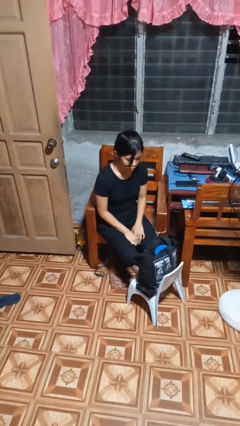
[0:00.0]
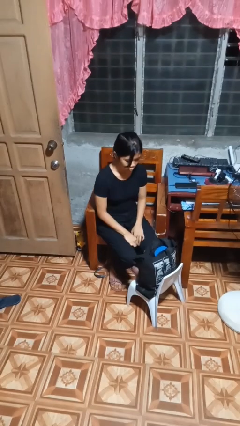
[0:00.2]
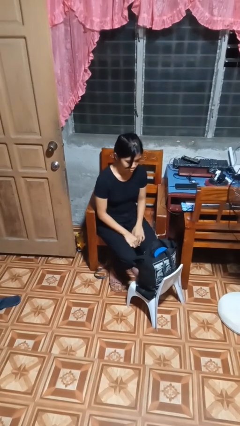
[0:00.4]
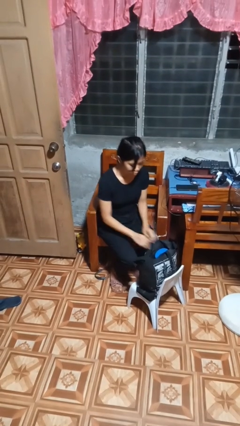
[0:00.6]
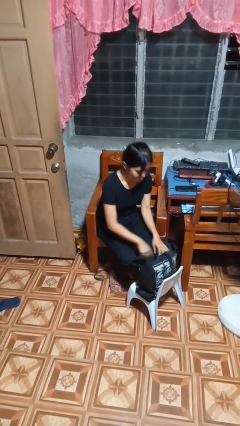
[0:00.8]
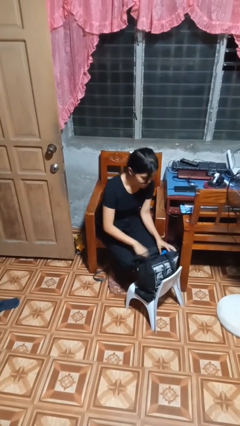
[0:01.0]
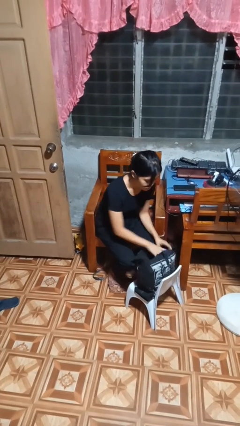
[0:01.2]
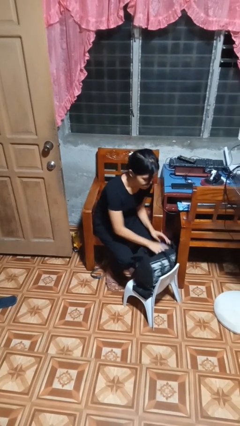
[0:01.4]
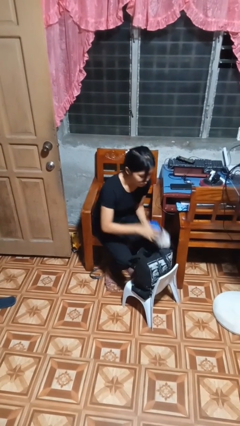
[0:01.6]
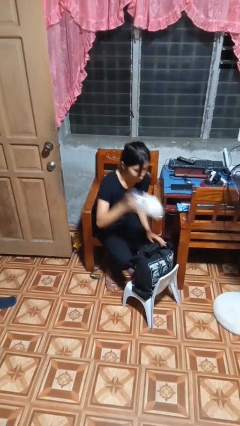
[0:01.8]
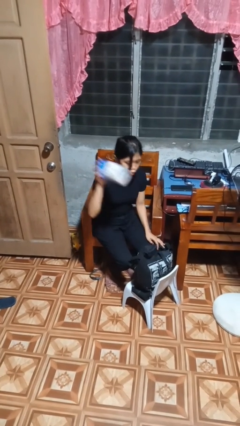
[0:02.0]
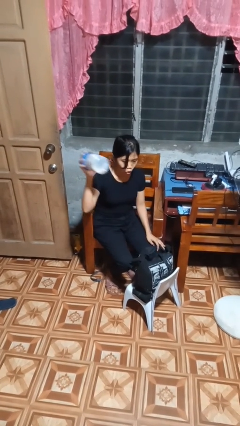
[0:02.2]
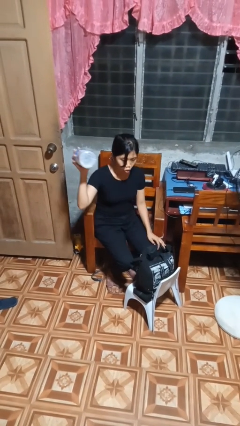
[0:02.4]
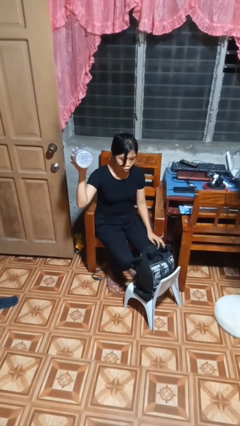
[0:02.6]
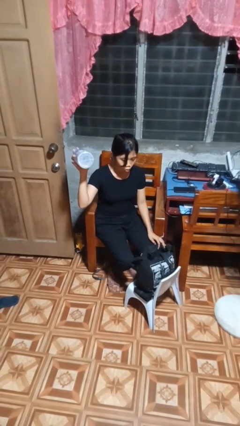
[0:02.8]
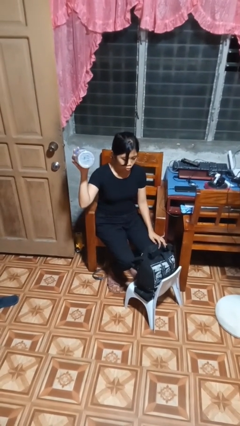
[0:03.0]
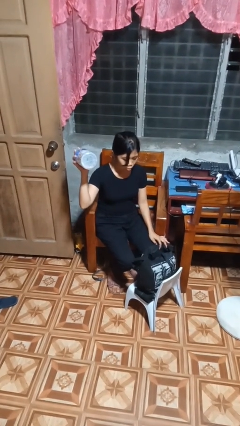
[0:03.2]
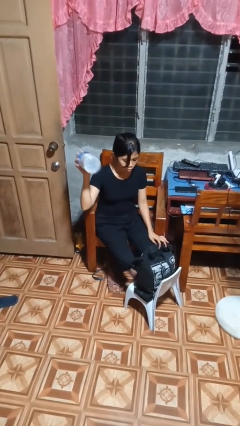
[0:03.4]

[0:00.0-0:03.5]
person searches in bag

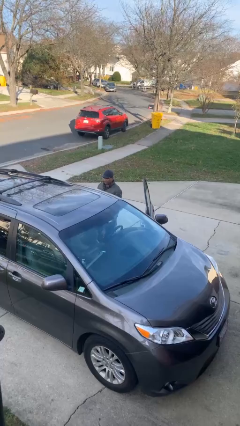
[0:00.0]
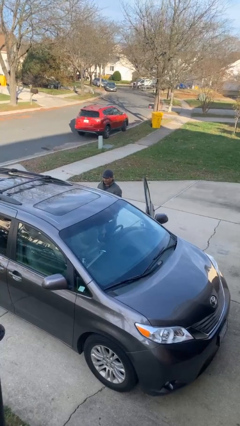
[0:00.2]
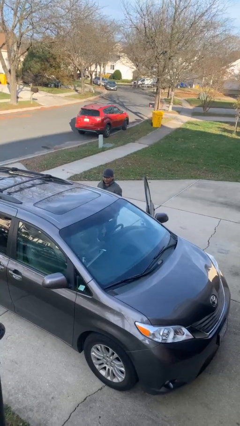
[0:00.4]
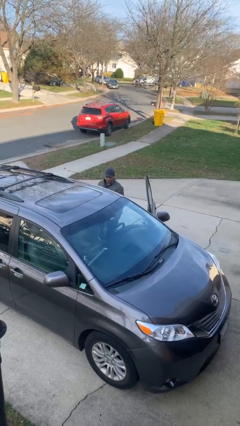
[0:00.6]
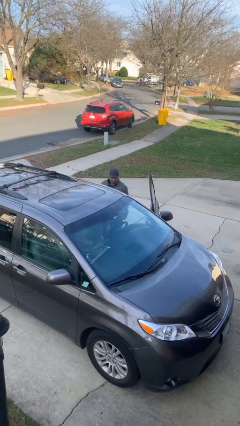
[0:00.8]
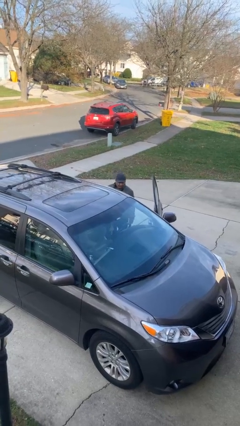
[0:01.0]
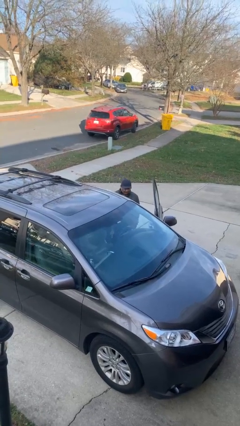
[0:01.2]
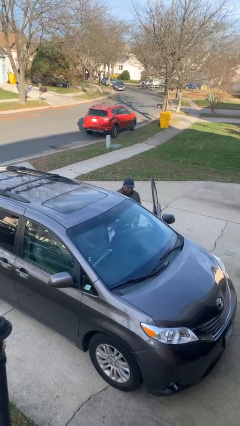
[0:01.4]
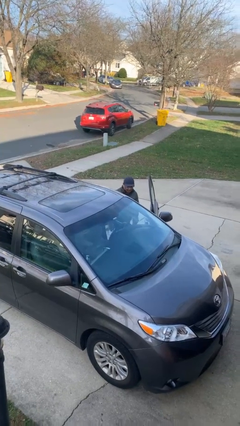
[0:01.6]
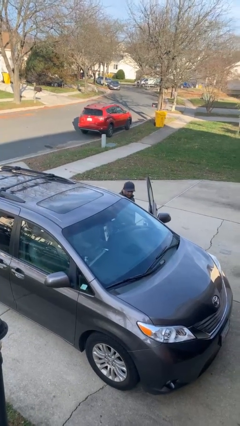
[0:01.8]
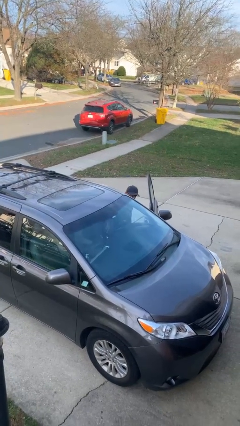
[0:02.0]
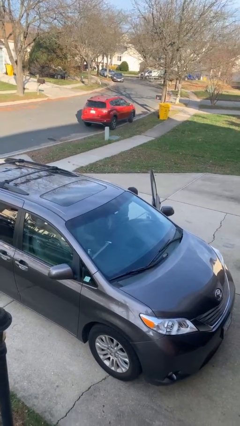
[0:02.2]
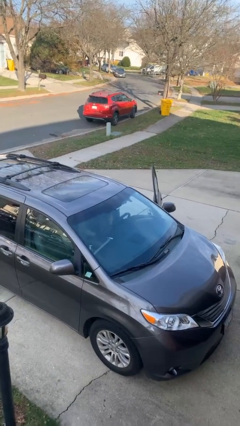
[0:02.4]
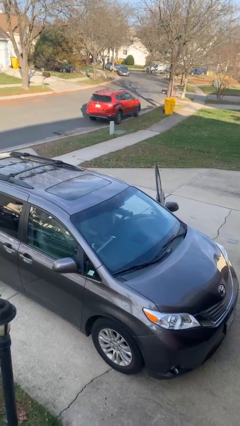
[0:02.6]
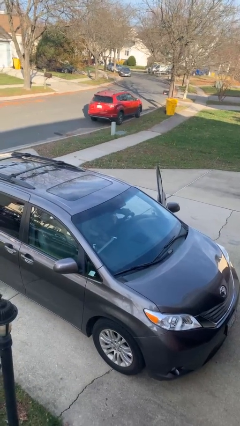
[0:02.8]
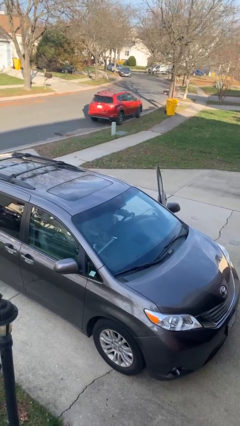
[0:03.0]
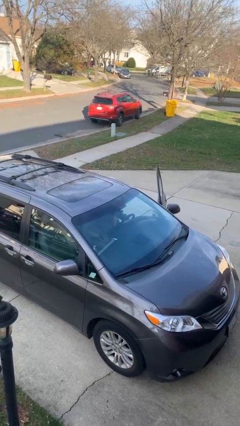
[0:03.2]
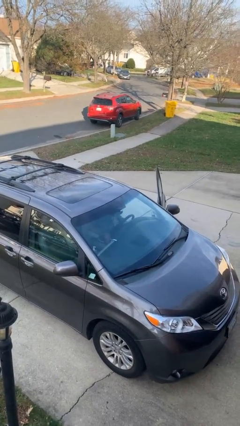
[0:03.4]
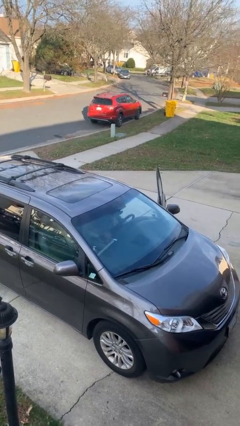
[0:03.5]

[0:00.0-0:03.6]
person enters car

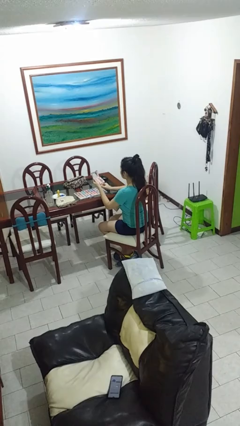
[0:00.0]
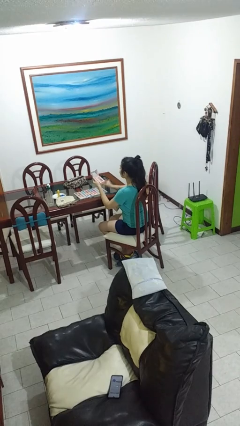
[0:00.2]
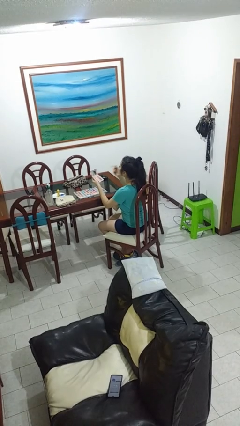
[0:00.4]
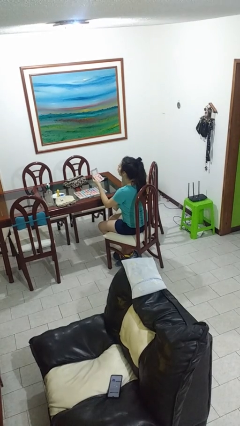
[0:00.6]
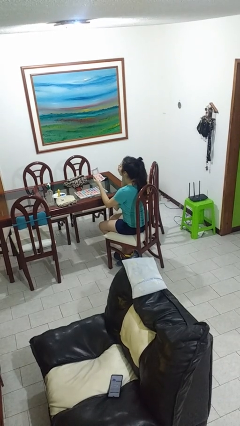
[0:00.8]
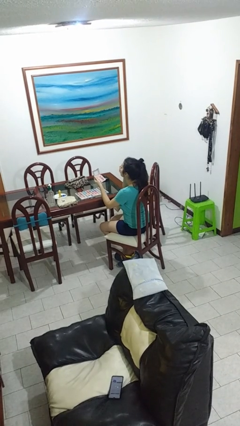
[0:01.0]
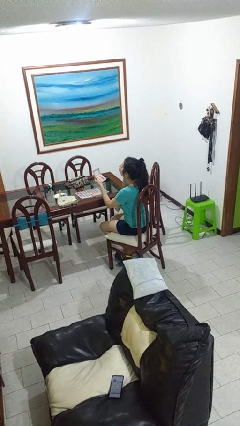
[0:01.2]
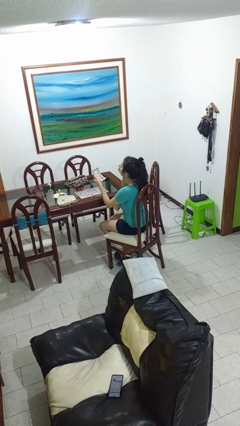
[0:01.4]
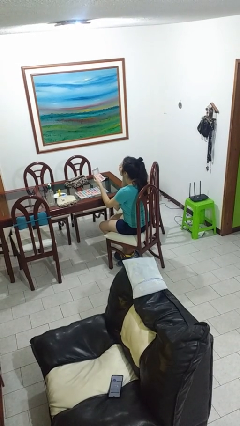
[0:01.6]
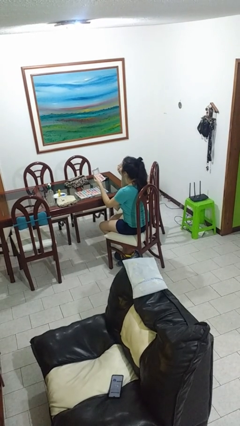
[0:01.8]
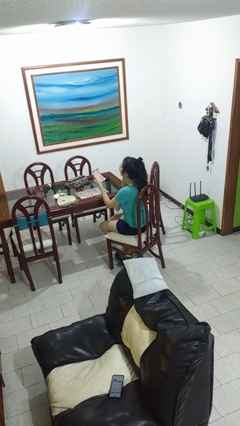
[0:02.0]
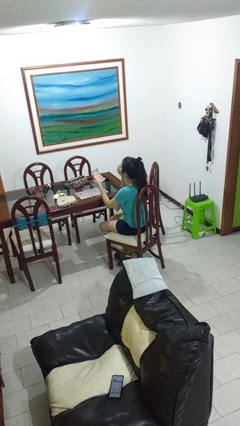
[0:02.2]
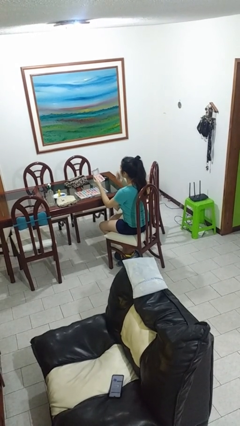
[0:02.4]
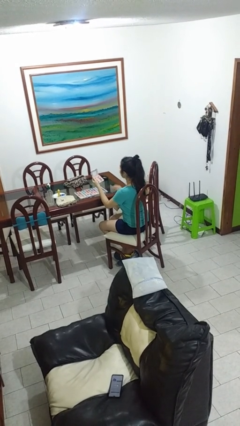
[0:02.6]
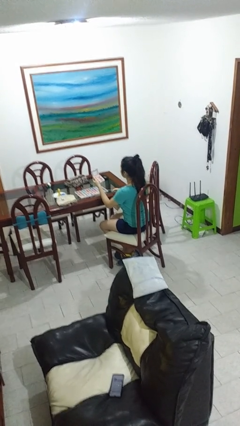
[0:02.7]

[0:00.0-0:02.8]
person applies eye makeup

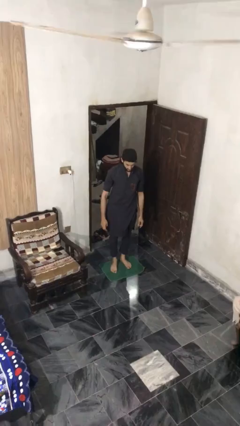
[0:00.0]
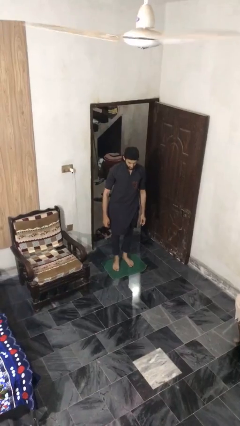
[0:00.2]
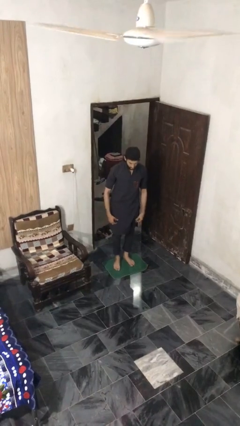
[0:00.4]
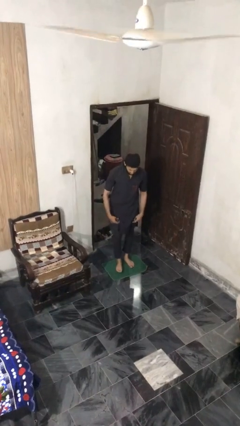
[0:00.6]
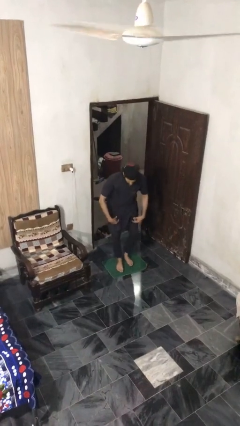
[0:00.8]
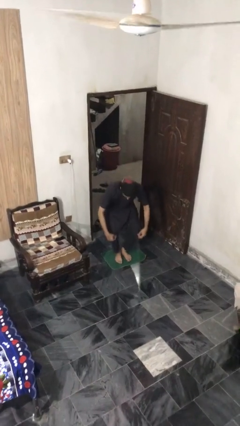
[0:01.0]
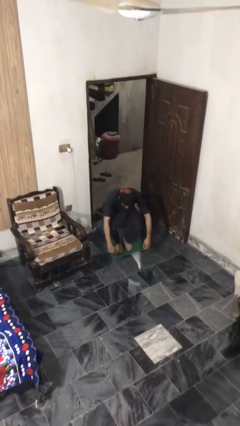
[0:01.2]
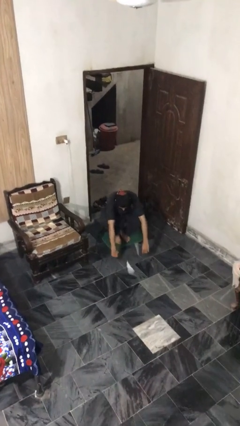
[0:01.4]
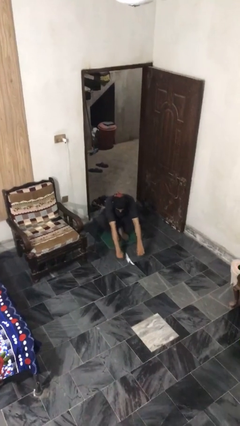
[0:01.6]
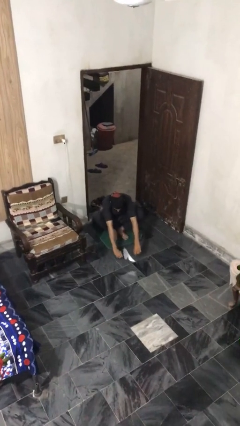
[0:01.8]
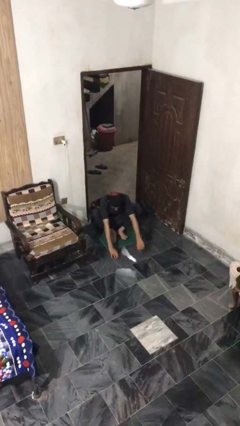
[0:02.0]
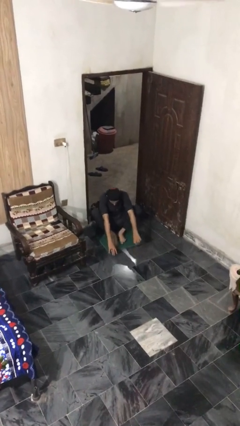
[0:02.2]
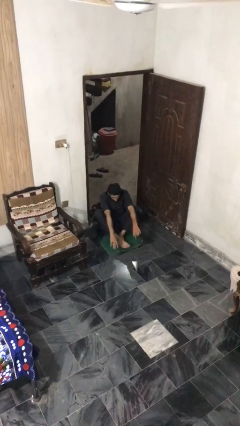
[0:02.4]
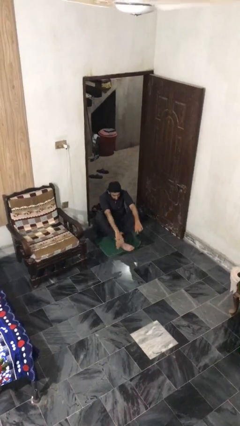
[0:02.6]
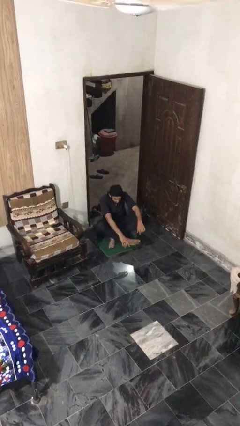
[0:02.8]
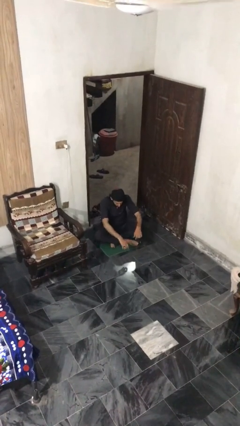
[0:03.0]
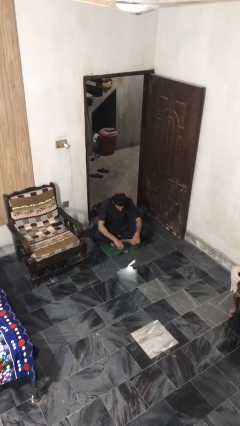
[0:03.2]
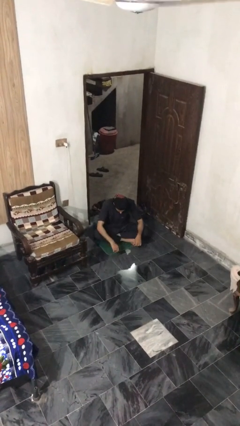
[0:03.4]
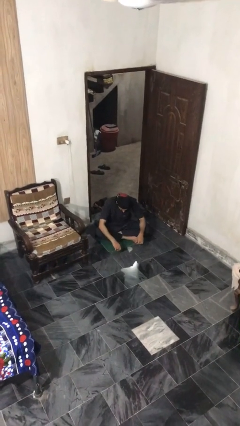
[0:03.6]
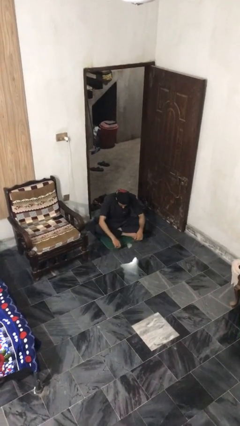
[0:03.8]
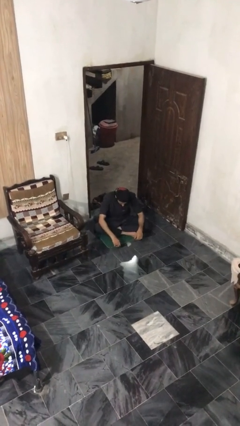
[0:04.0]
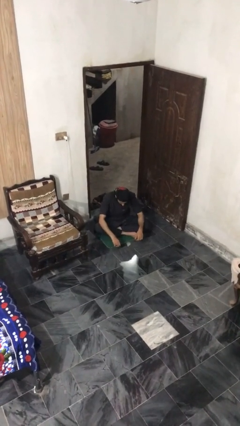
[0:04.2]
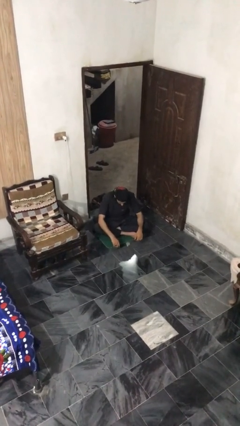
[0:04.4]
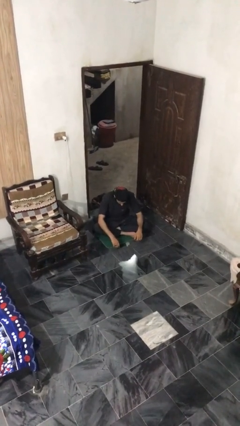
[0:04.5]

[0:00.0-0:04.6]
person sits crisscross

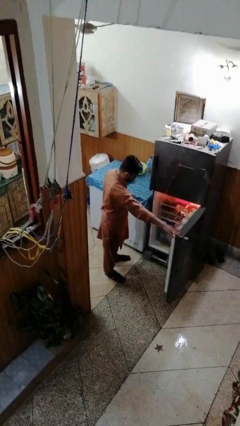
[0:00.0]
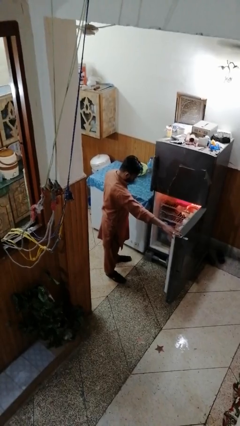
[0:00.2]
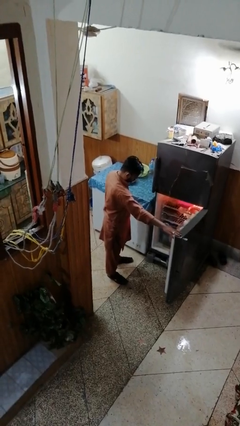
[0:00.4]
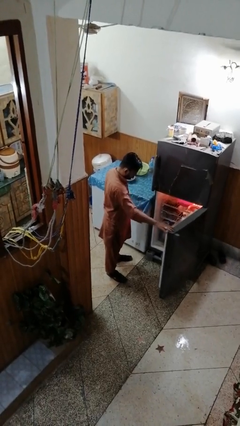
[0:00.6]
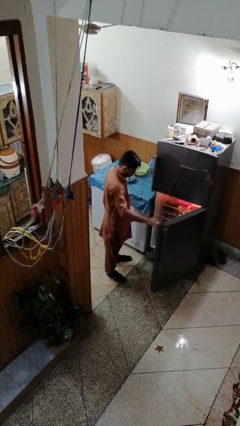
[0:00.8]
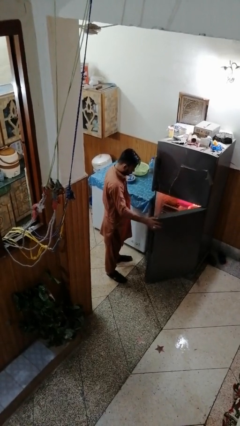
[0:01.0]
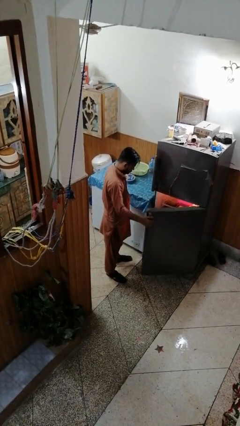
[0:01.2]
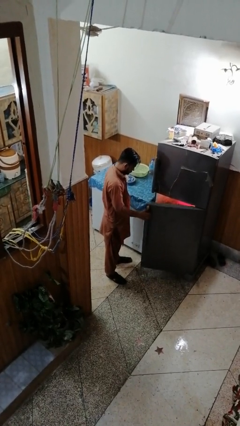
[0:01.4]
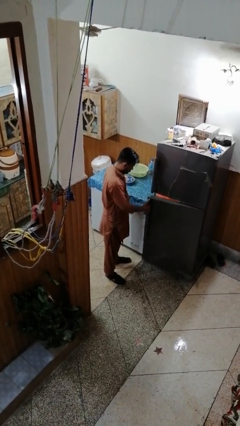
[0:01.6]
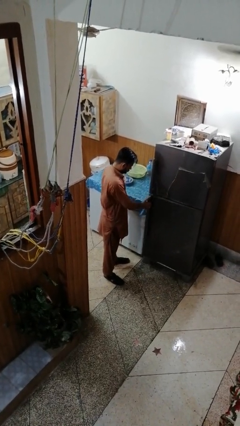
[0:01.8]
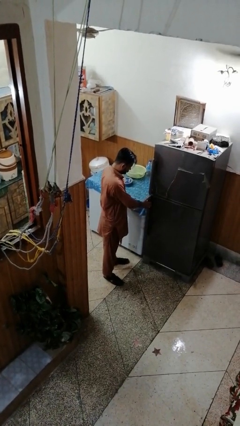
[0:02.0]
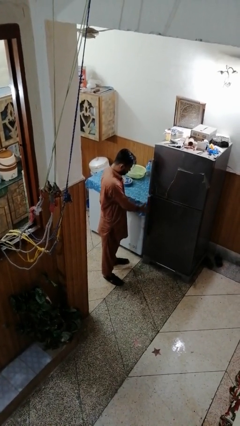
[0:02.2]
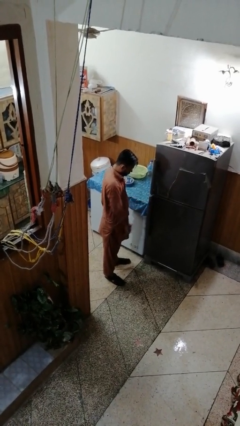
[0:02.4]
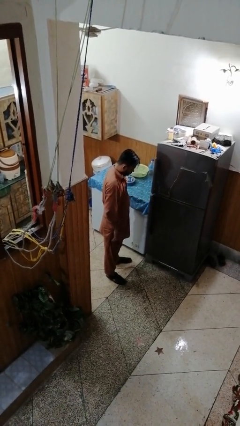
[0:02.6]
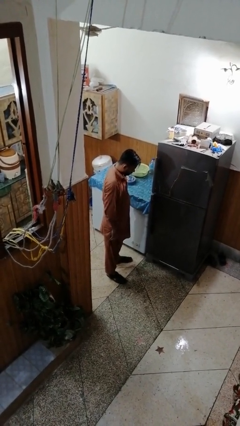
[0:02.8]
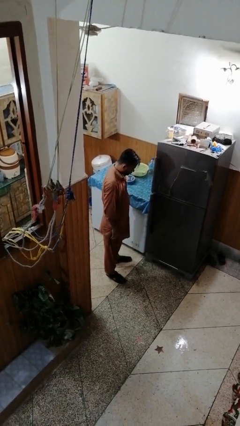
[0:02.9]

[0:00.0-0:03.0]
person closes refrigerator

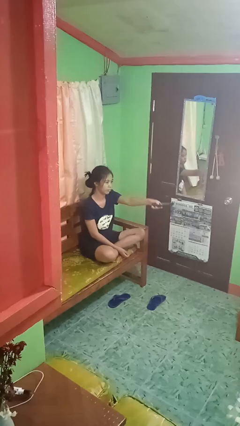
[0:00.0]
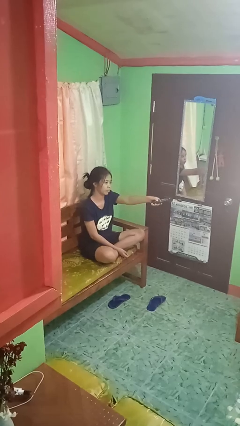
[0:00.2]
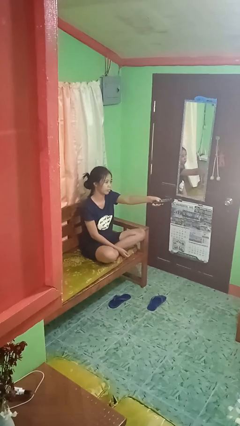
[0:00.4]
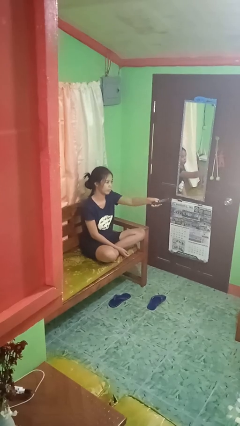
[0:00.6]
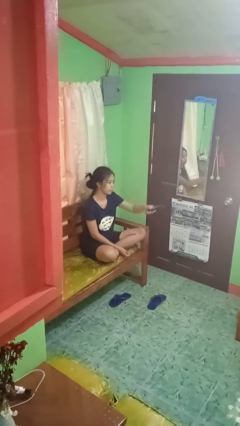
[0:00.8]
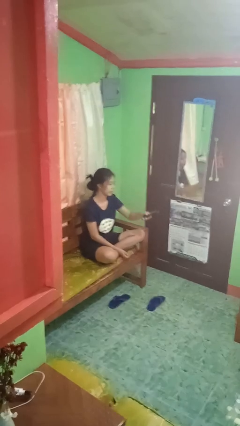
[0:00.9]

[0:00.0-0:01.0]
person uses television remote
